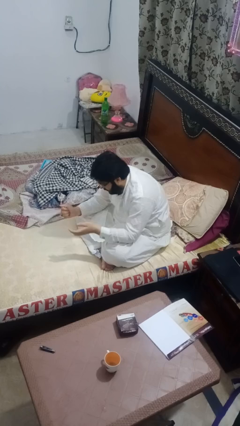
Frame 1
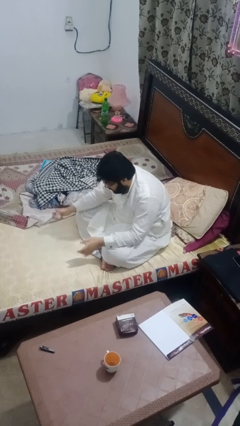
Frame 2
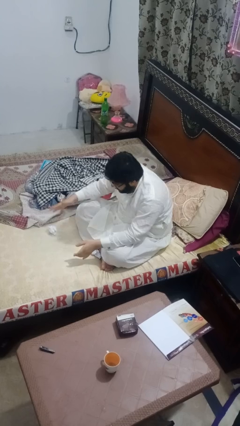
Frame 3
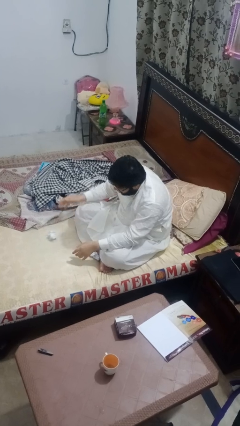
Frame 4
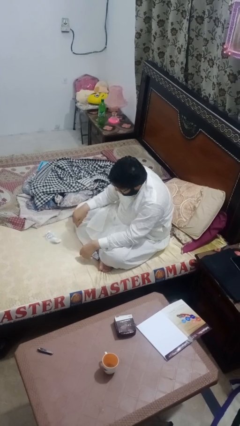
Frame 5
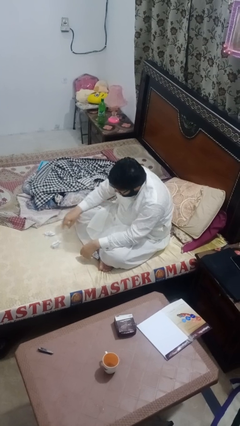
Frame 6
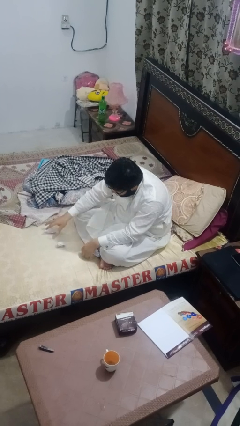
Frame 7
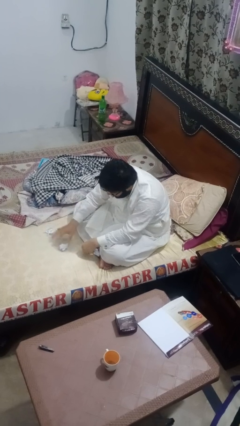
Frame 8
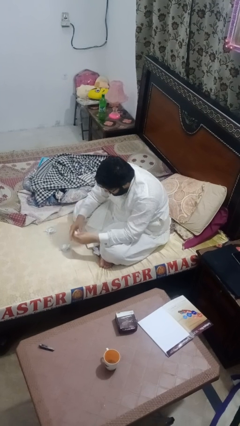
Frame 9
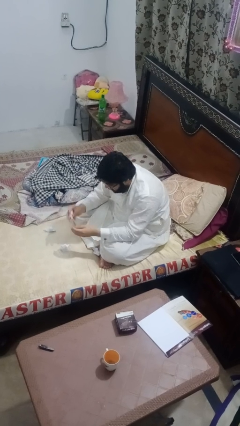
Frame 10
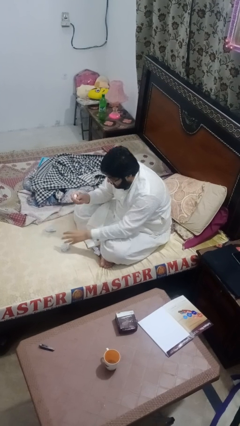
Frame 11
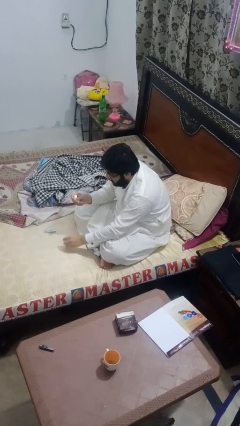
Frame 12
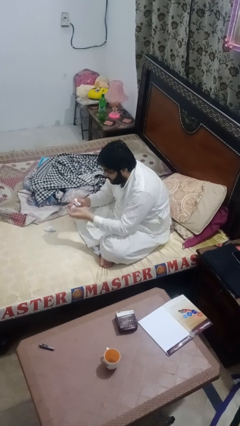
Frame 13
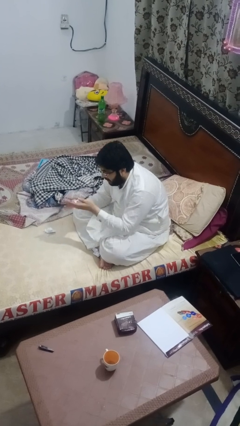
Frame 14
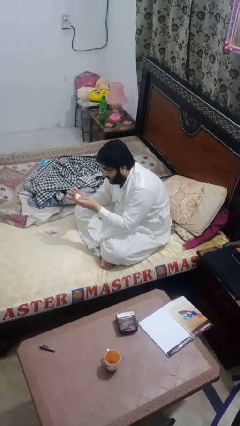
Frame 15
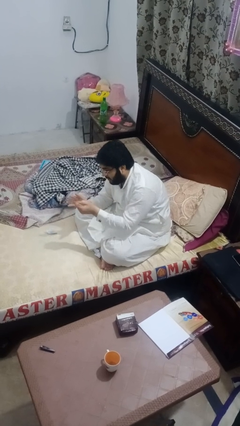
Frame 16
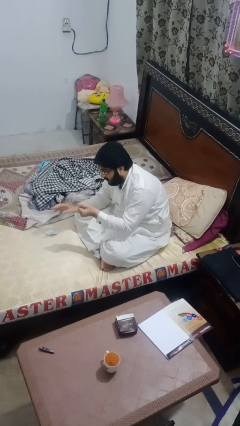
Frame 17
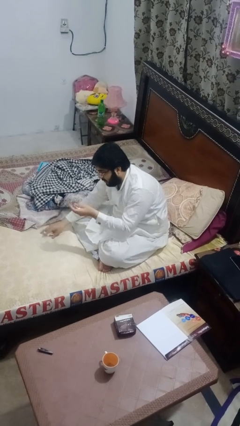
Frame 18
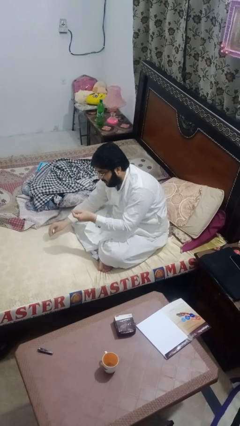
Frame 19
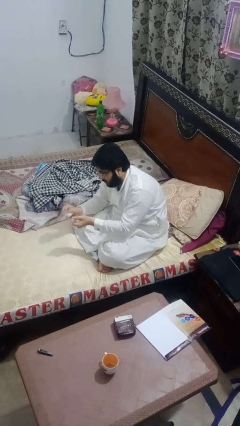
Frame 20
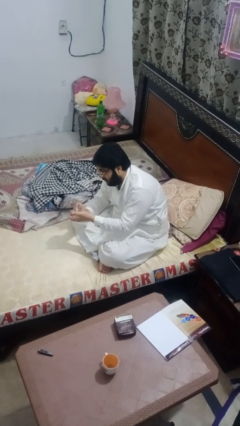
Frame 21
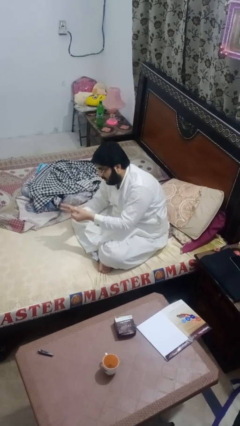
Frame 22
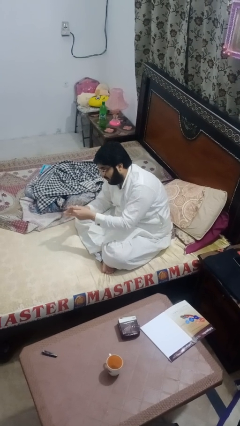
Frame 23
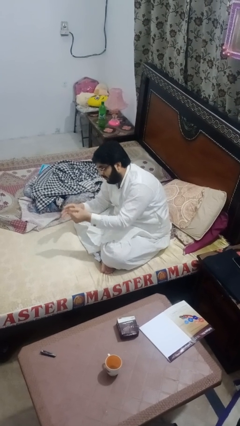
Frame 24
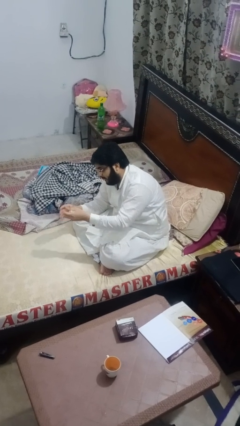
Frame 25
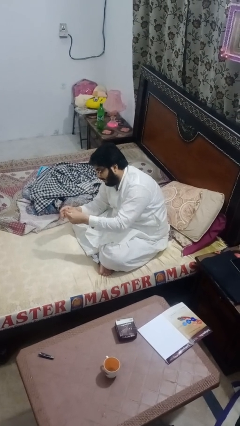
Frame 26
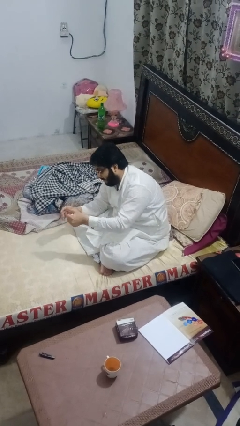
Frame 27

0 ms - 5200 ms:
person crumples paper

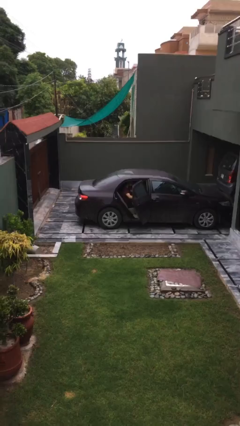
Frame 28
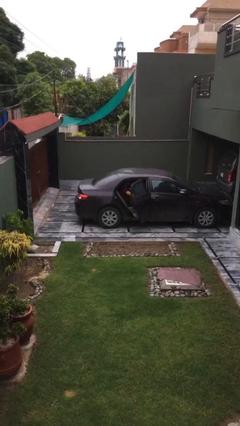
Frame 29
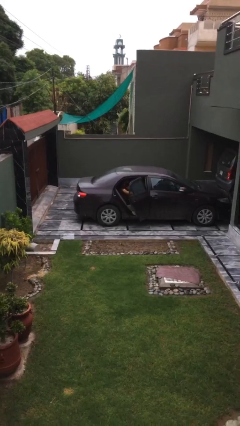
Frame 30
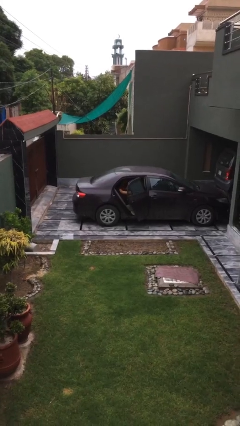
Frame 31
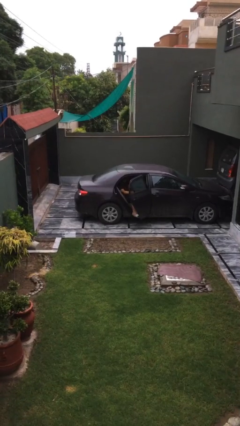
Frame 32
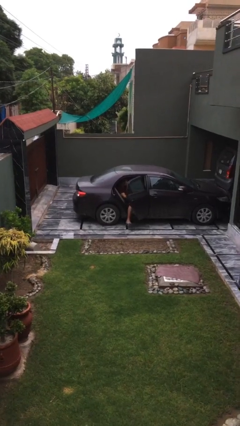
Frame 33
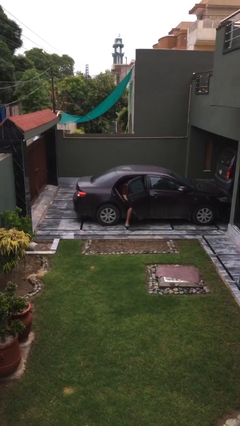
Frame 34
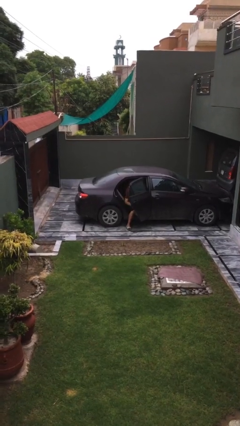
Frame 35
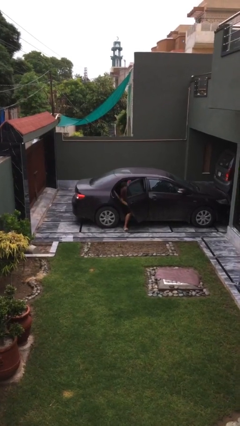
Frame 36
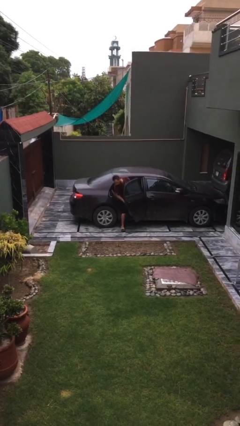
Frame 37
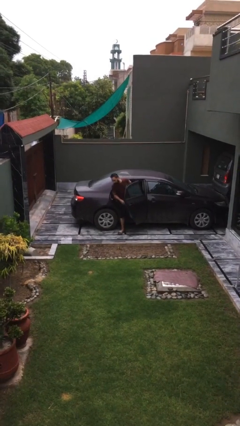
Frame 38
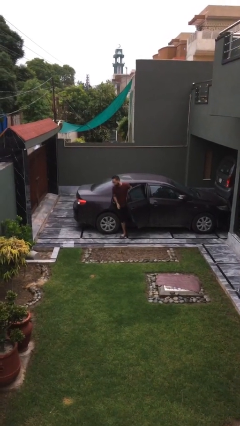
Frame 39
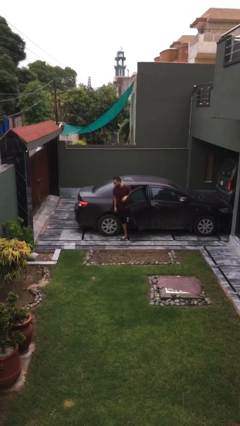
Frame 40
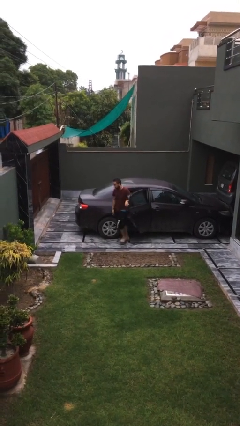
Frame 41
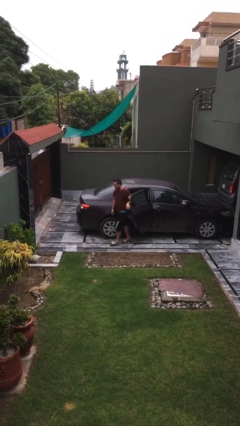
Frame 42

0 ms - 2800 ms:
person exits car

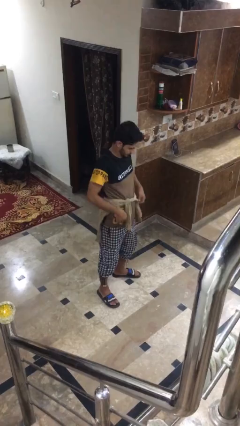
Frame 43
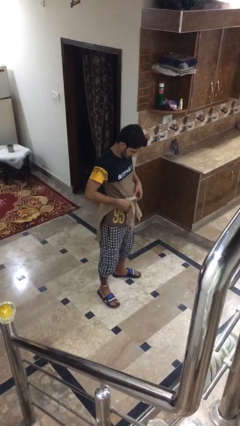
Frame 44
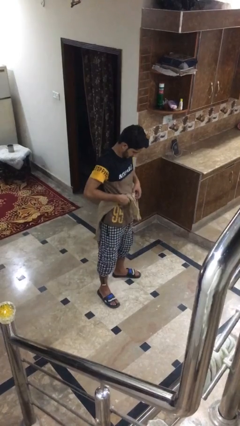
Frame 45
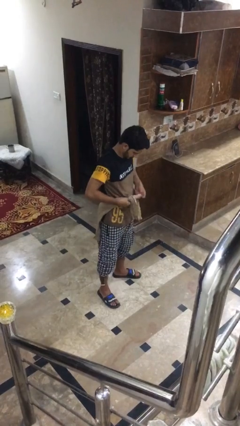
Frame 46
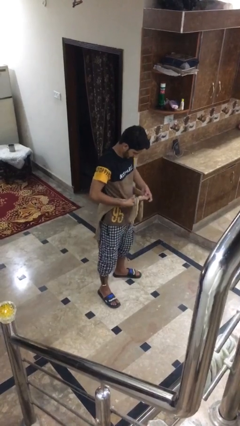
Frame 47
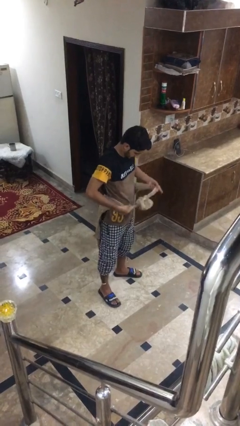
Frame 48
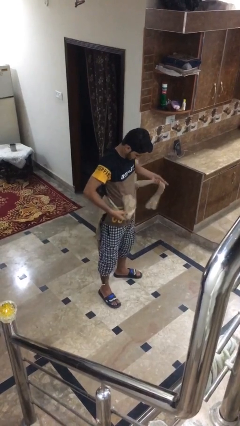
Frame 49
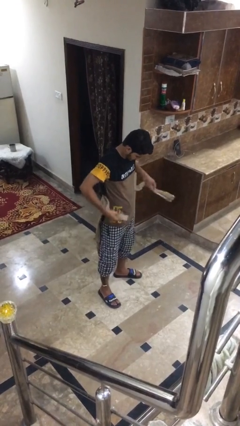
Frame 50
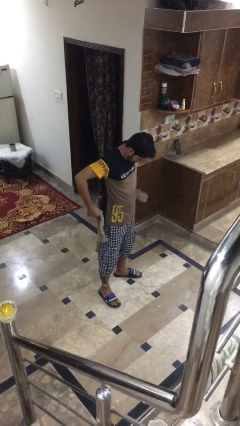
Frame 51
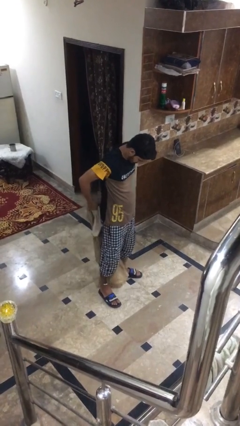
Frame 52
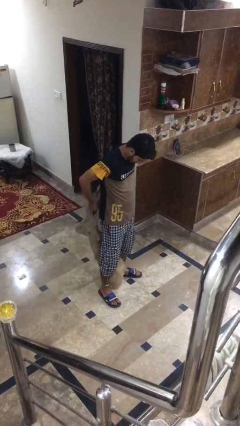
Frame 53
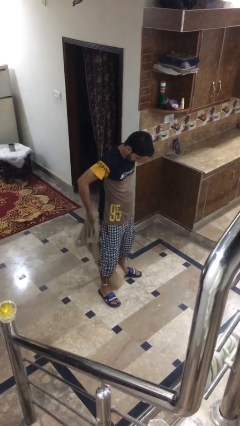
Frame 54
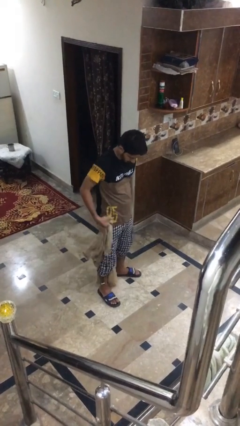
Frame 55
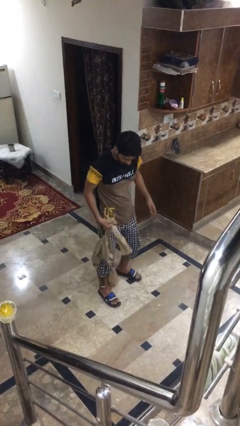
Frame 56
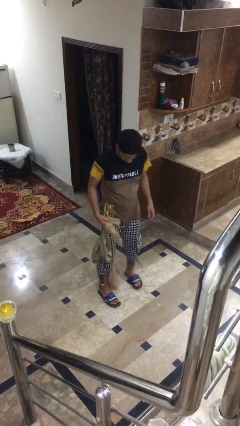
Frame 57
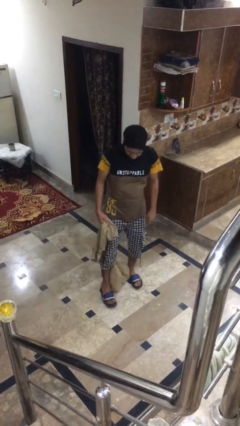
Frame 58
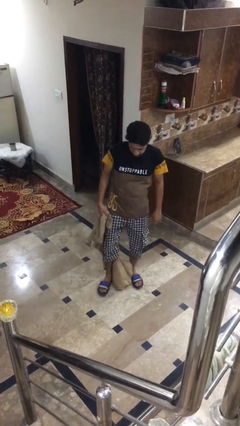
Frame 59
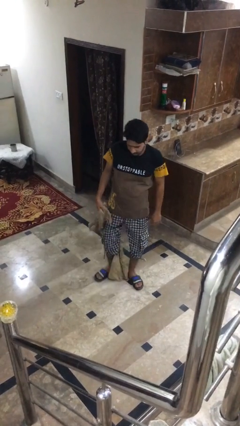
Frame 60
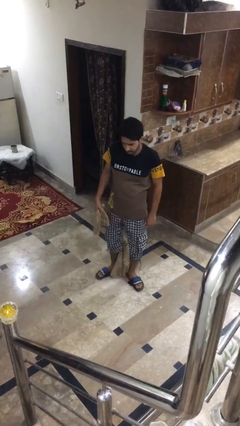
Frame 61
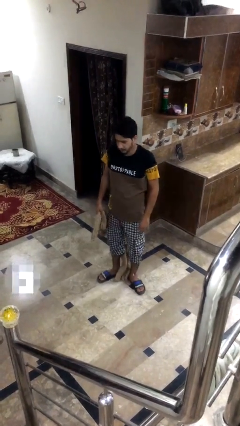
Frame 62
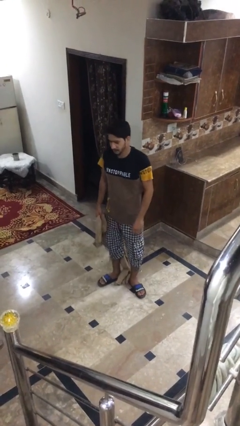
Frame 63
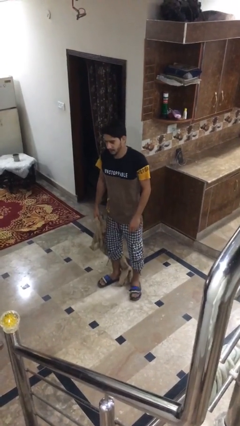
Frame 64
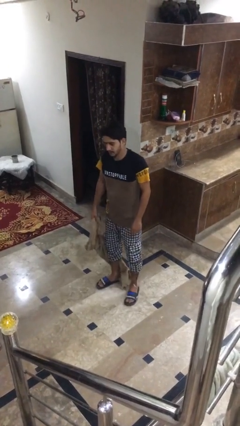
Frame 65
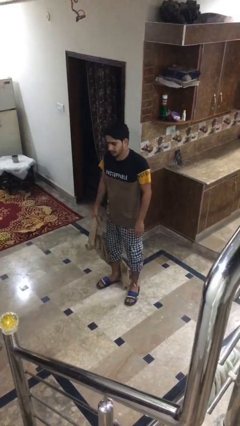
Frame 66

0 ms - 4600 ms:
person unties jacket around waist

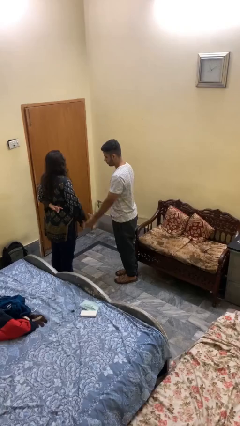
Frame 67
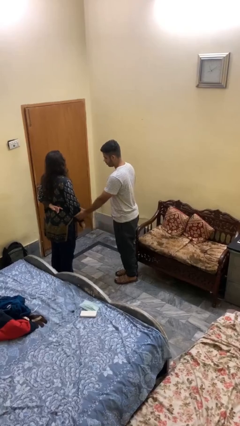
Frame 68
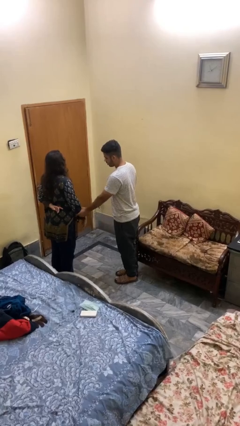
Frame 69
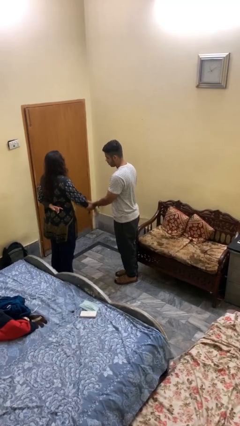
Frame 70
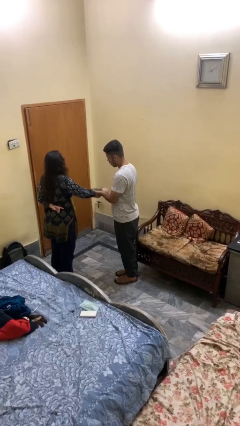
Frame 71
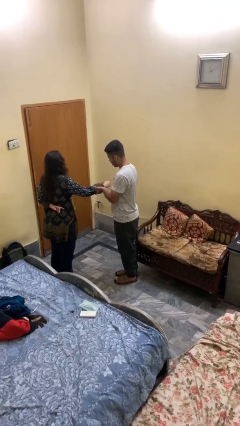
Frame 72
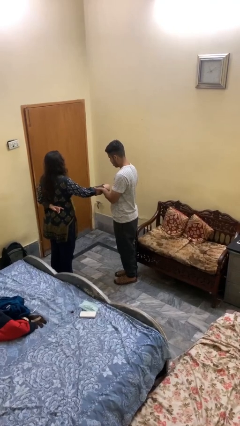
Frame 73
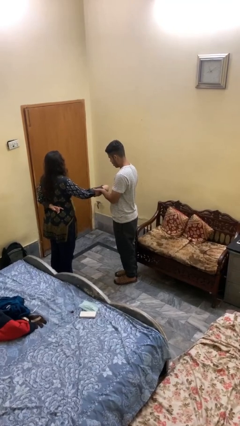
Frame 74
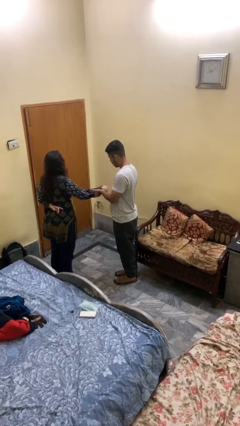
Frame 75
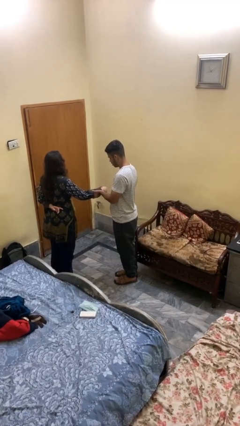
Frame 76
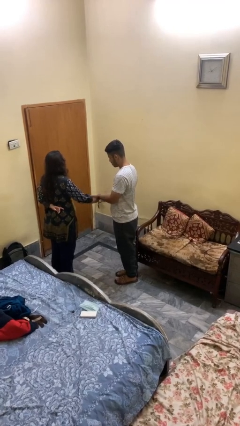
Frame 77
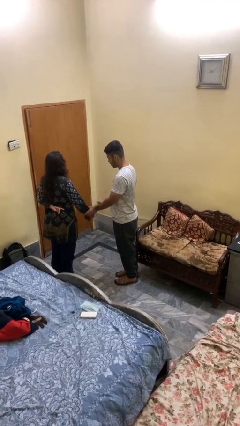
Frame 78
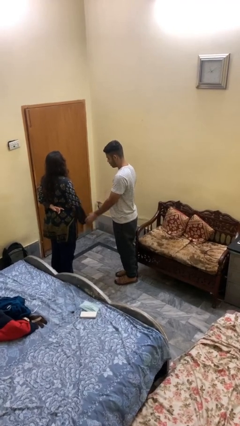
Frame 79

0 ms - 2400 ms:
person grabs person by forearm

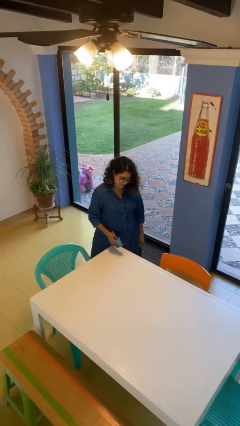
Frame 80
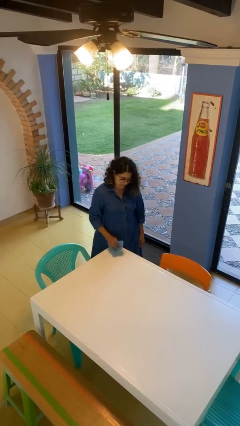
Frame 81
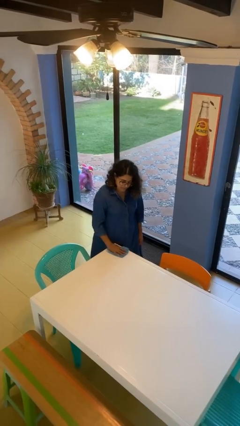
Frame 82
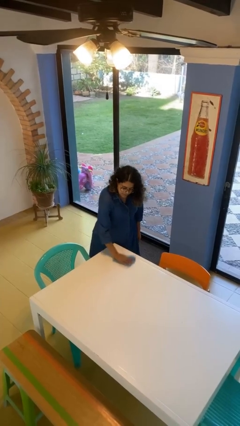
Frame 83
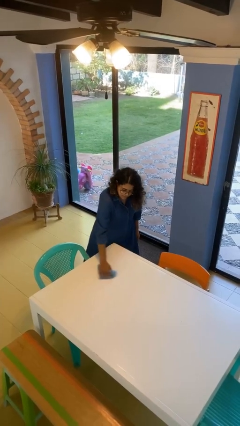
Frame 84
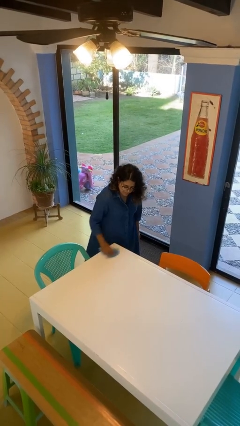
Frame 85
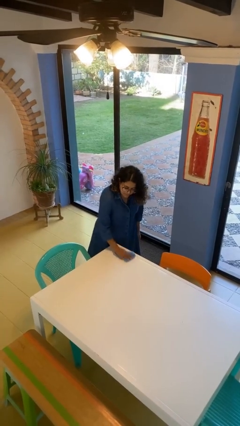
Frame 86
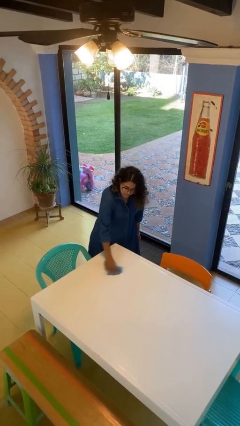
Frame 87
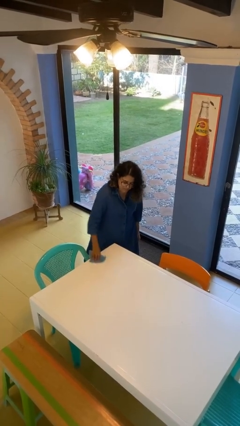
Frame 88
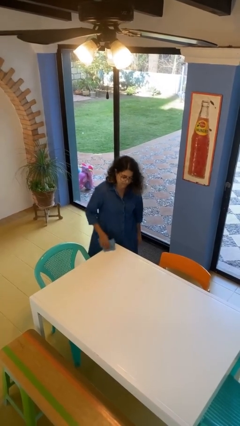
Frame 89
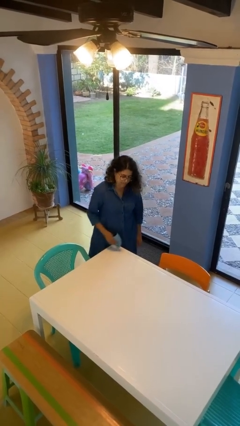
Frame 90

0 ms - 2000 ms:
person cleans table with rag

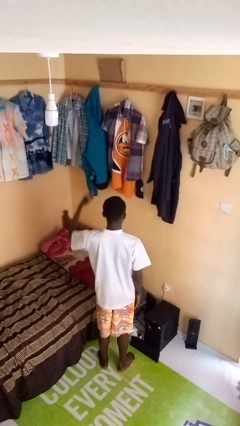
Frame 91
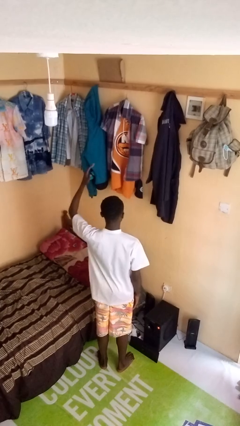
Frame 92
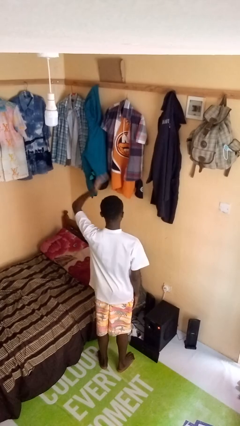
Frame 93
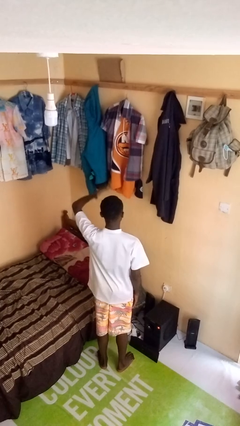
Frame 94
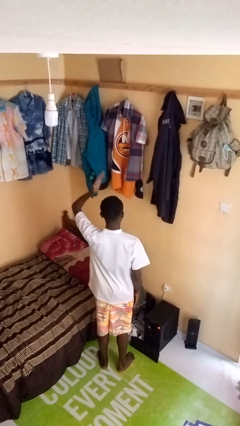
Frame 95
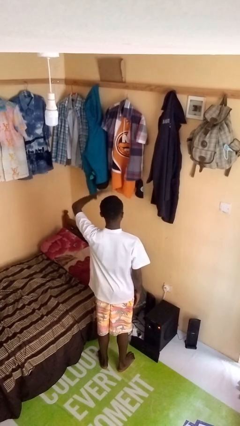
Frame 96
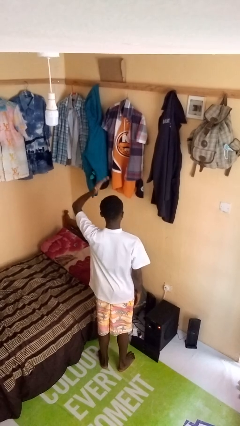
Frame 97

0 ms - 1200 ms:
person pats head
